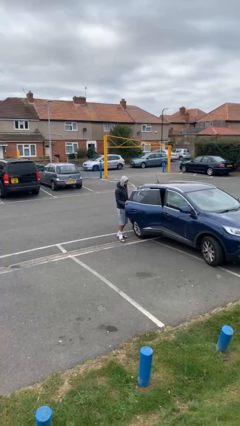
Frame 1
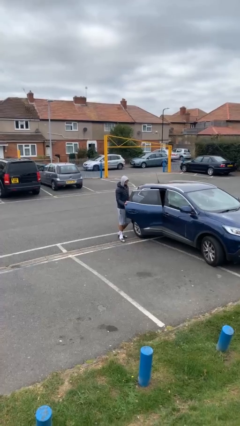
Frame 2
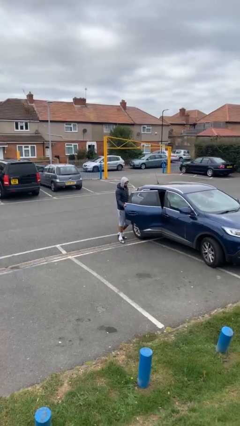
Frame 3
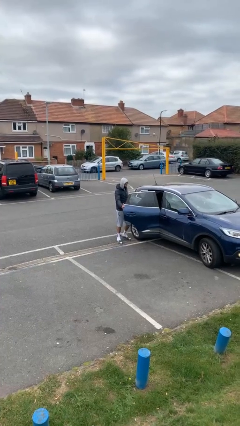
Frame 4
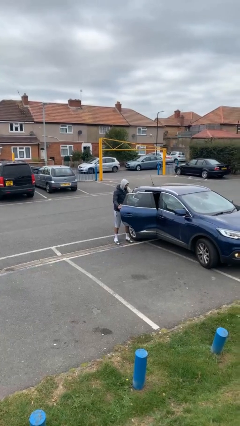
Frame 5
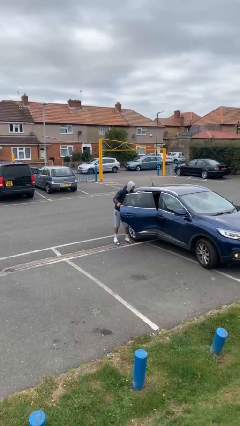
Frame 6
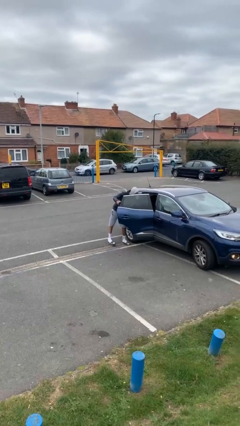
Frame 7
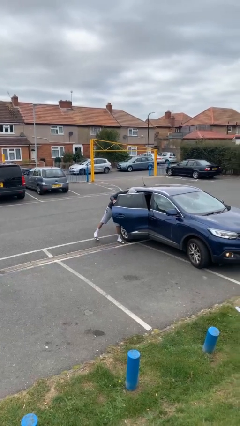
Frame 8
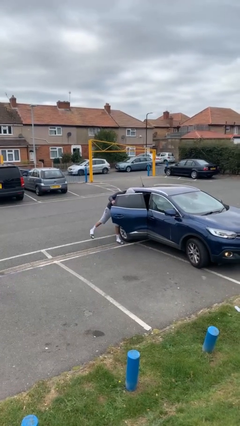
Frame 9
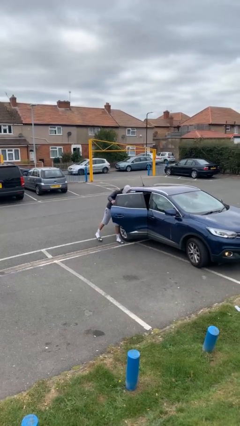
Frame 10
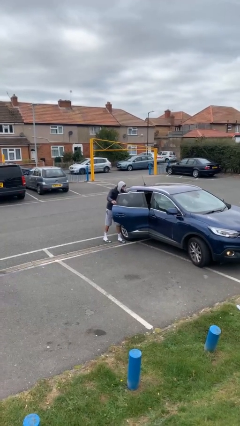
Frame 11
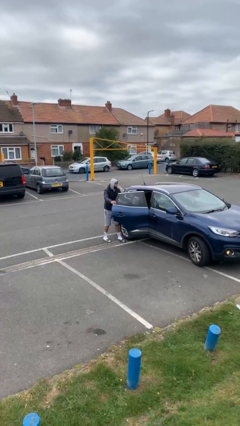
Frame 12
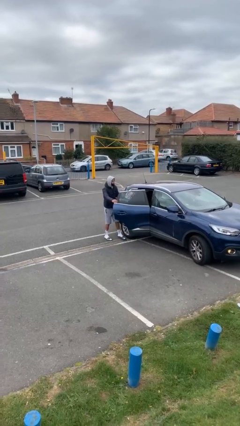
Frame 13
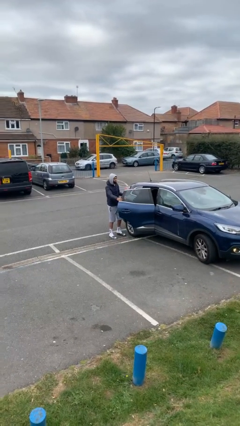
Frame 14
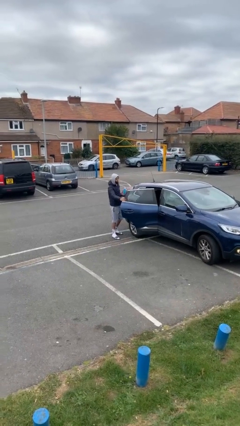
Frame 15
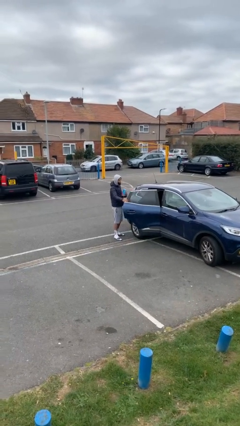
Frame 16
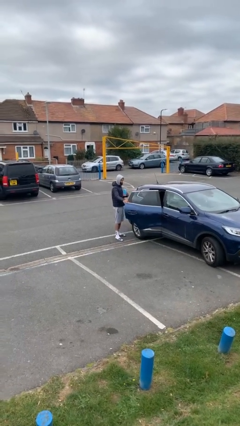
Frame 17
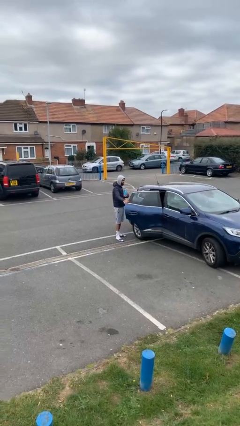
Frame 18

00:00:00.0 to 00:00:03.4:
person unloads car

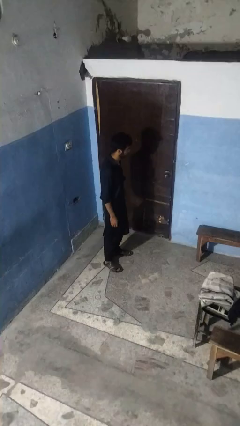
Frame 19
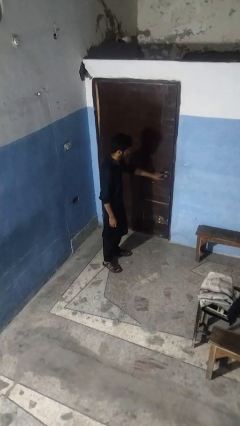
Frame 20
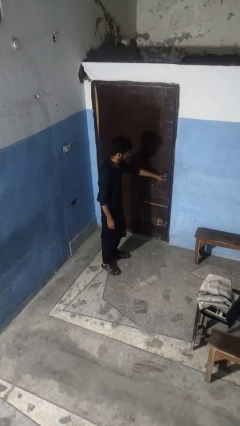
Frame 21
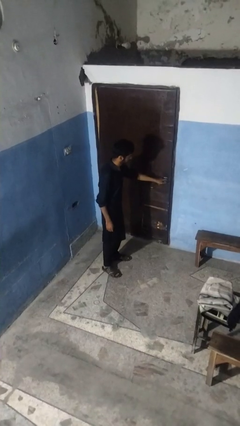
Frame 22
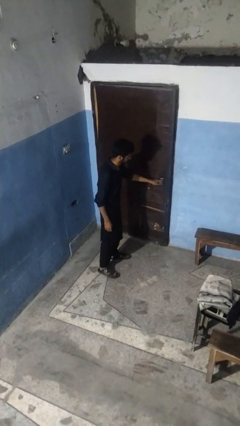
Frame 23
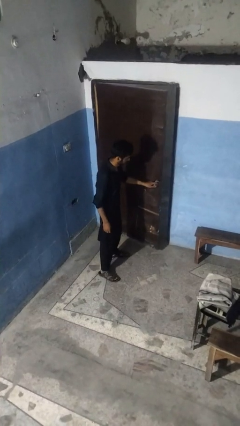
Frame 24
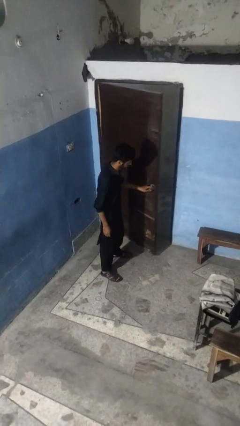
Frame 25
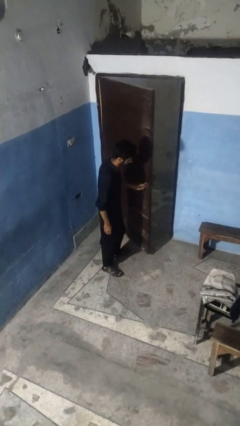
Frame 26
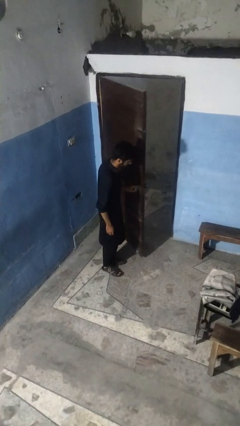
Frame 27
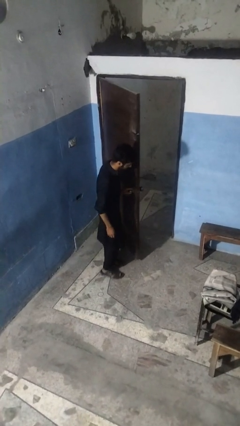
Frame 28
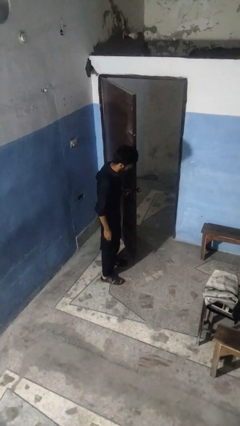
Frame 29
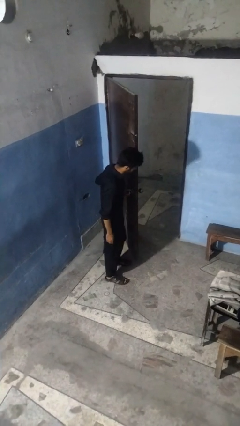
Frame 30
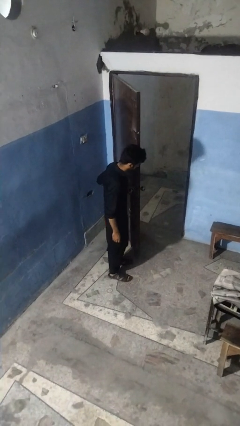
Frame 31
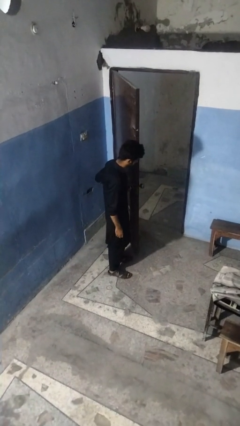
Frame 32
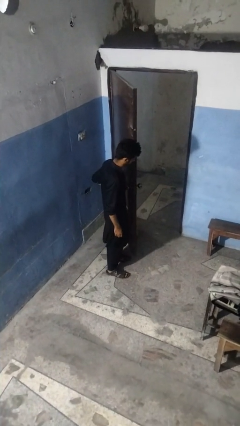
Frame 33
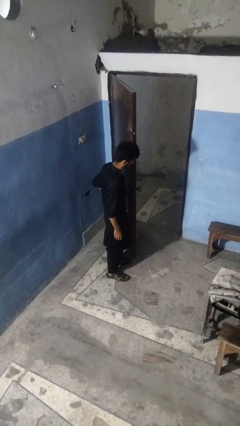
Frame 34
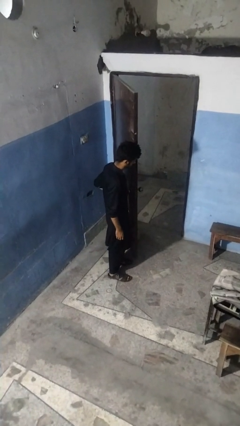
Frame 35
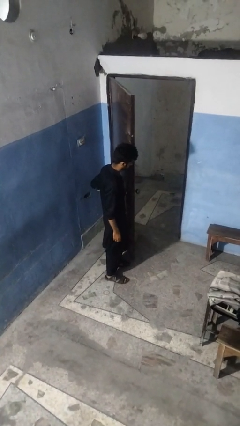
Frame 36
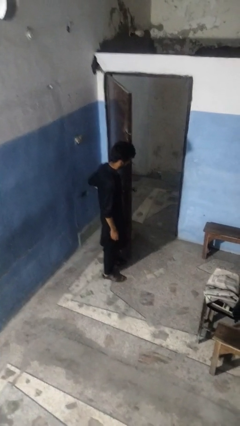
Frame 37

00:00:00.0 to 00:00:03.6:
person opens facility door

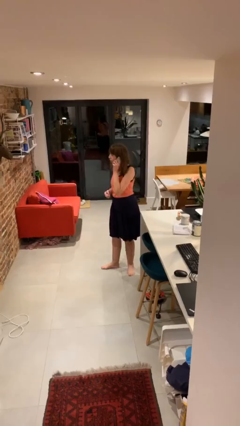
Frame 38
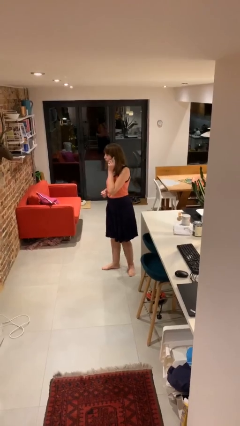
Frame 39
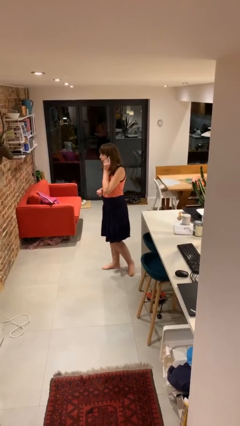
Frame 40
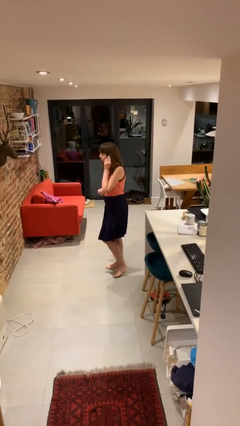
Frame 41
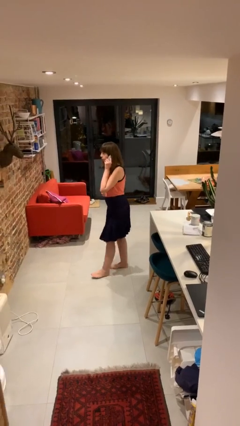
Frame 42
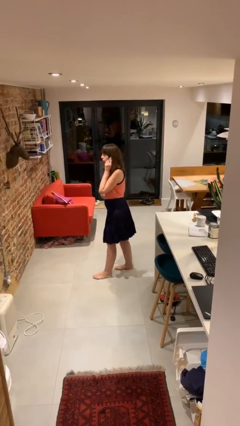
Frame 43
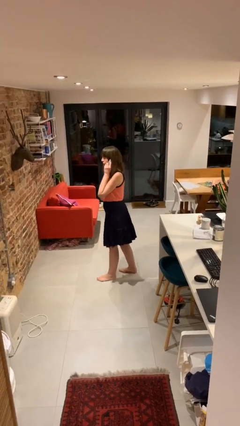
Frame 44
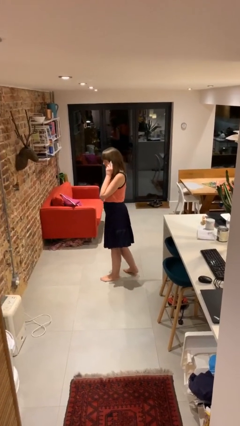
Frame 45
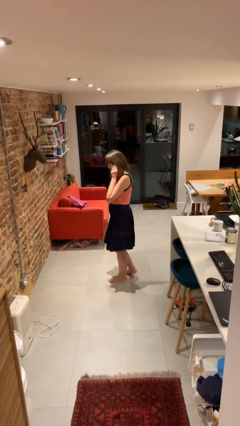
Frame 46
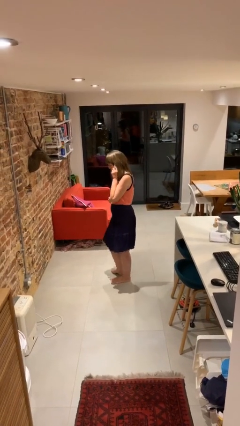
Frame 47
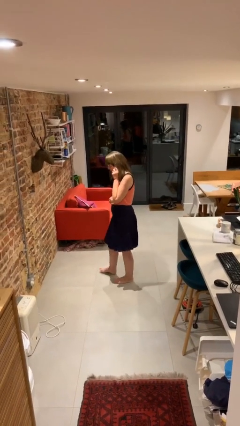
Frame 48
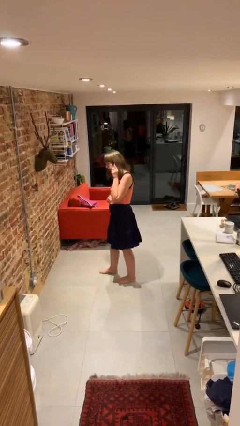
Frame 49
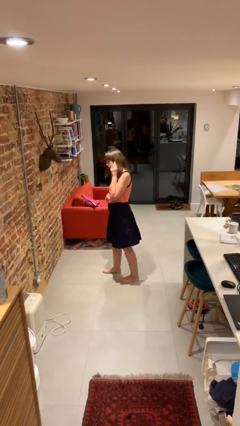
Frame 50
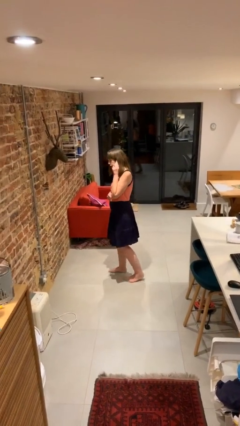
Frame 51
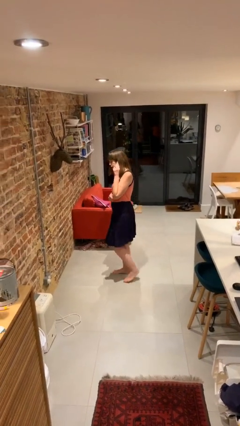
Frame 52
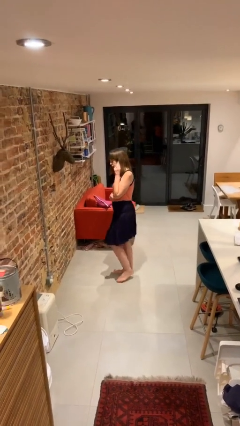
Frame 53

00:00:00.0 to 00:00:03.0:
person talks on phone

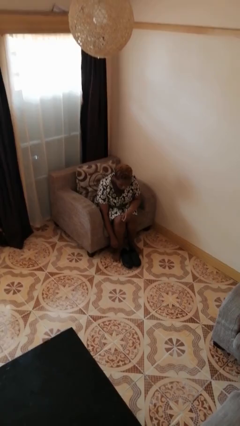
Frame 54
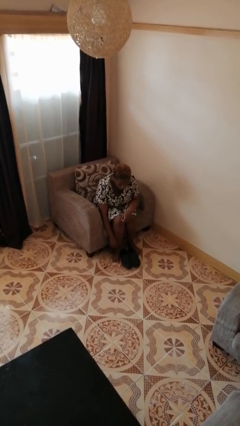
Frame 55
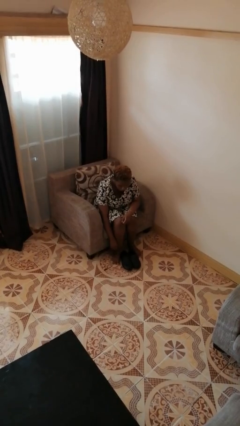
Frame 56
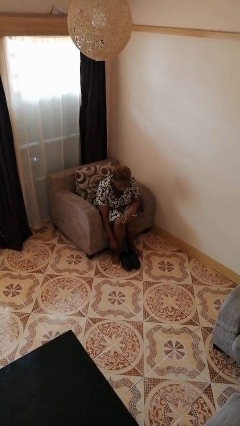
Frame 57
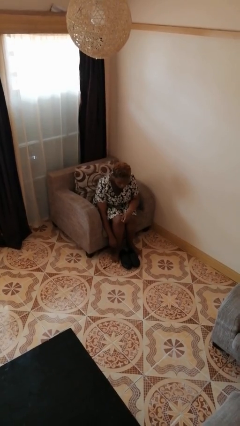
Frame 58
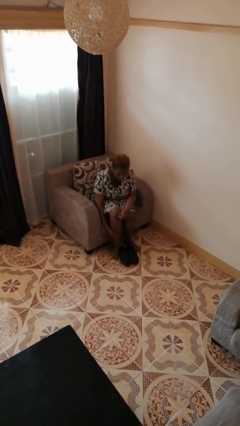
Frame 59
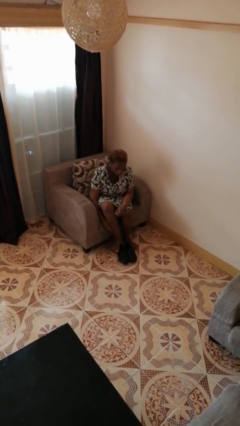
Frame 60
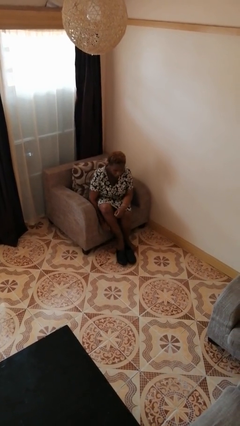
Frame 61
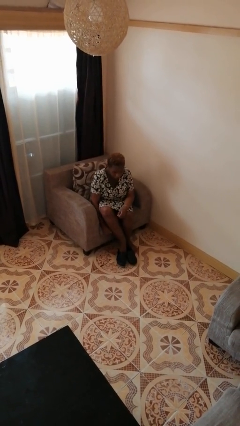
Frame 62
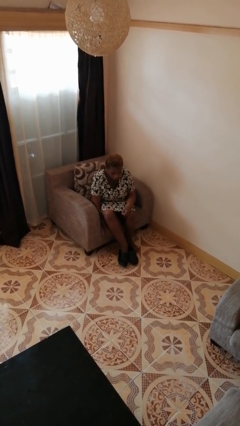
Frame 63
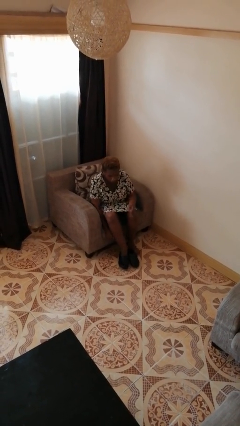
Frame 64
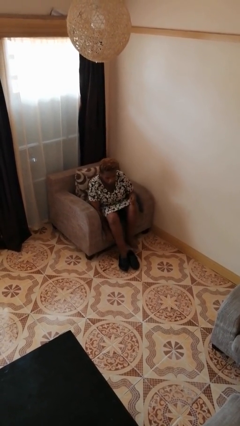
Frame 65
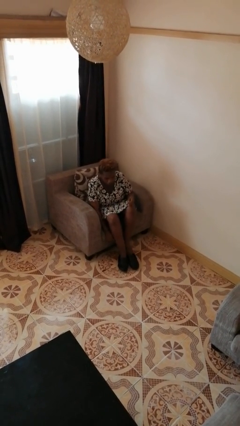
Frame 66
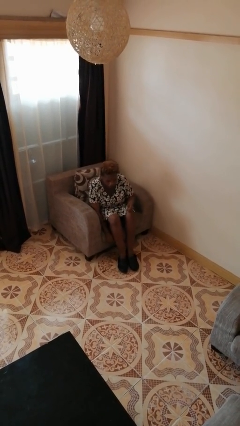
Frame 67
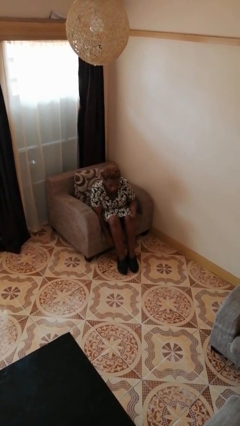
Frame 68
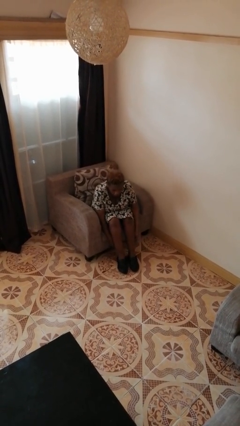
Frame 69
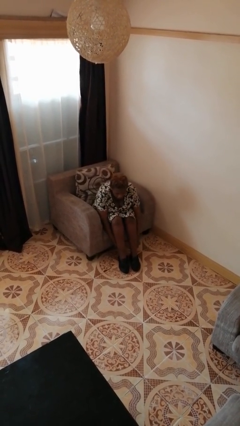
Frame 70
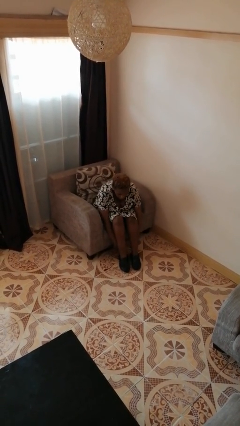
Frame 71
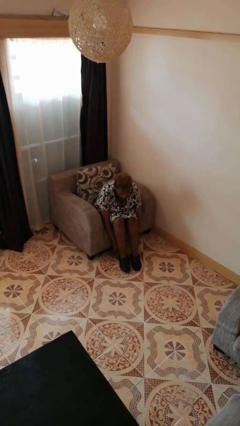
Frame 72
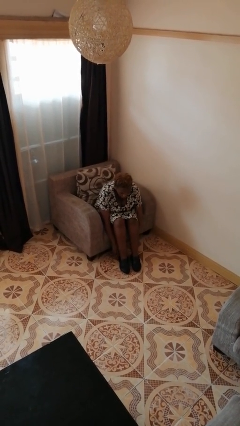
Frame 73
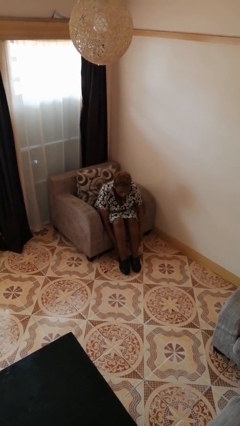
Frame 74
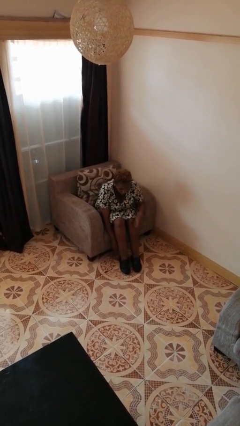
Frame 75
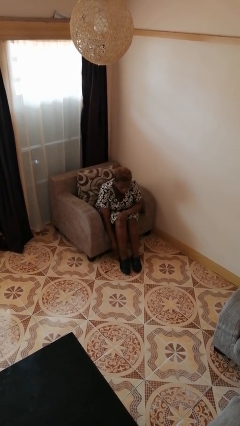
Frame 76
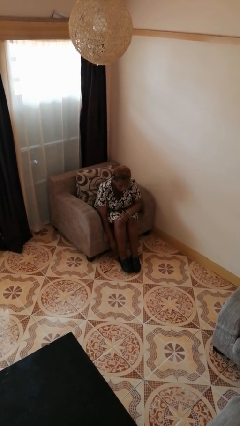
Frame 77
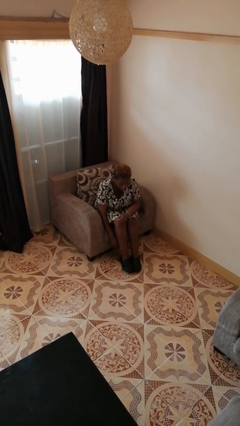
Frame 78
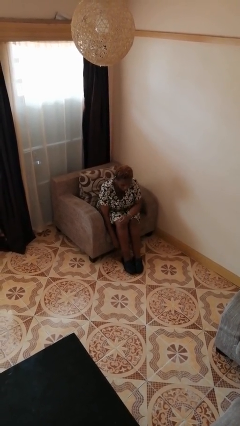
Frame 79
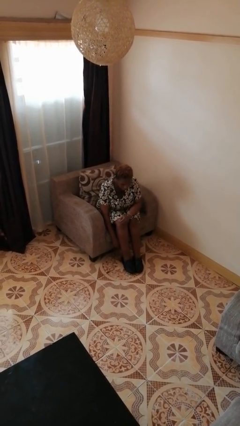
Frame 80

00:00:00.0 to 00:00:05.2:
person puts on shoes

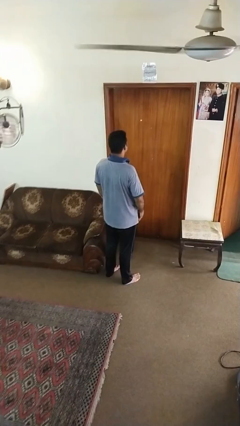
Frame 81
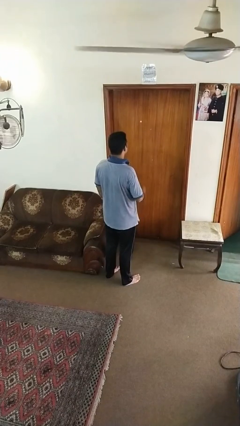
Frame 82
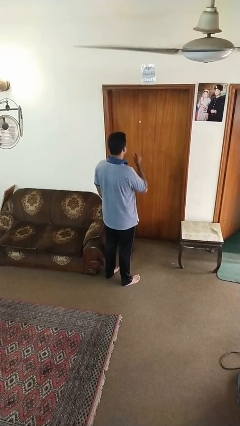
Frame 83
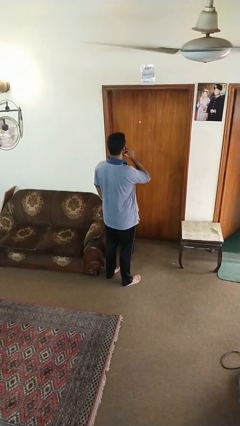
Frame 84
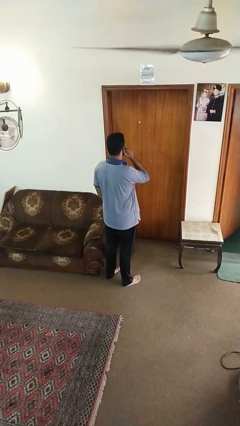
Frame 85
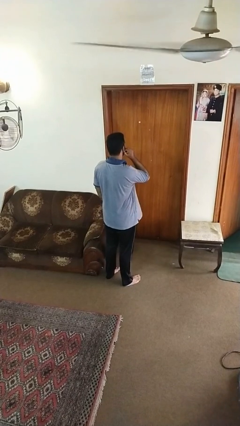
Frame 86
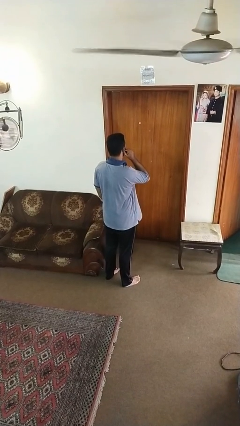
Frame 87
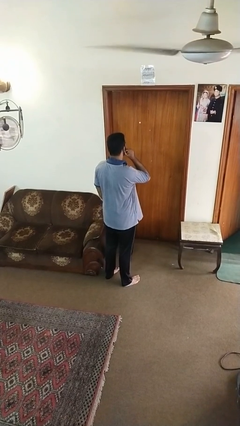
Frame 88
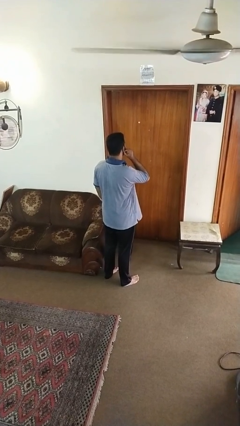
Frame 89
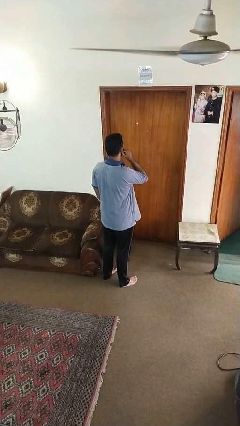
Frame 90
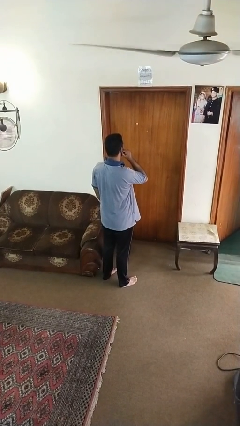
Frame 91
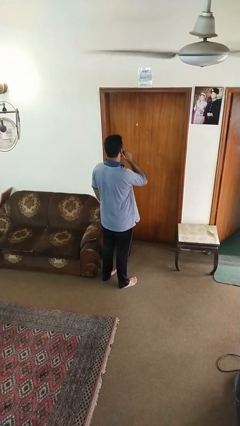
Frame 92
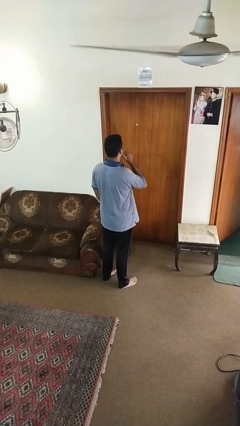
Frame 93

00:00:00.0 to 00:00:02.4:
person touches earlobe
